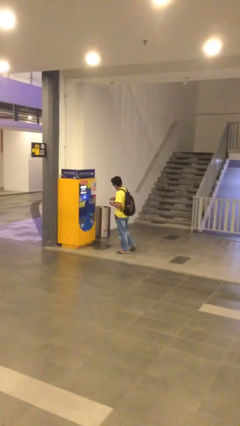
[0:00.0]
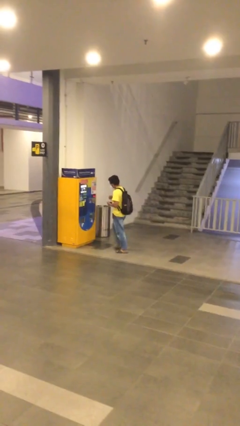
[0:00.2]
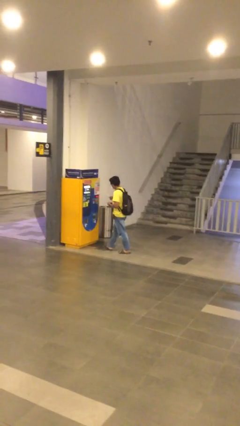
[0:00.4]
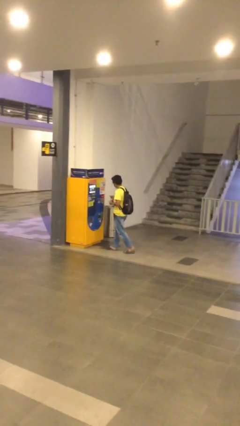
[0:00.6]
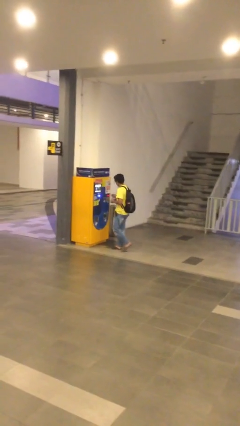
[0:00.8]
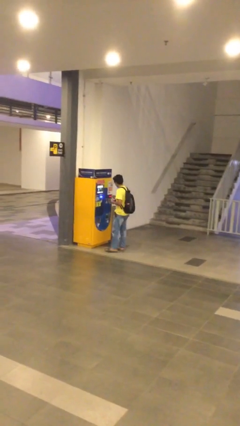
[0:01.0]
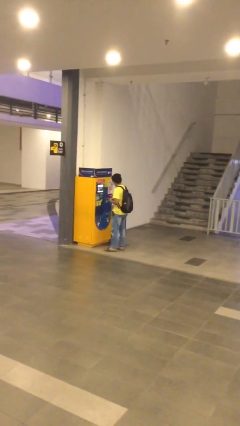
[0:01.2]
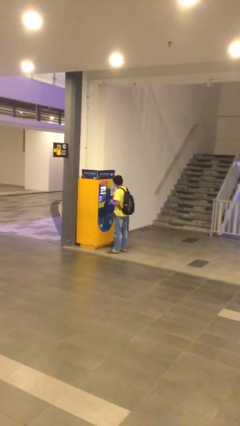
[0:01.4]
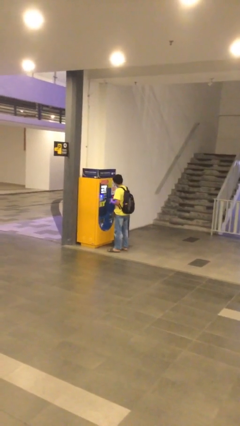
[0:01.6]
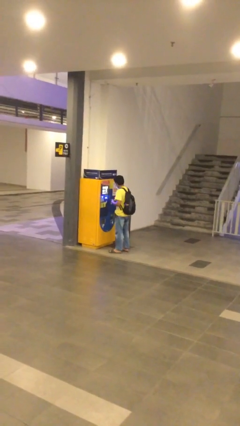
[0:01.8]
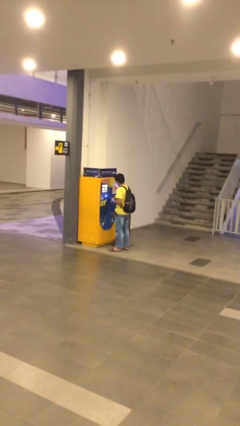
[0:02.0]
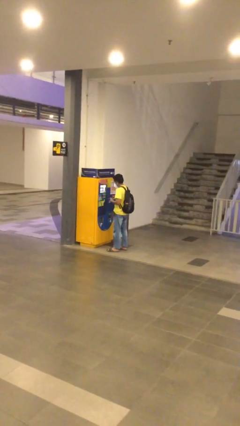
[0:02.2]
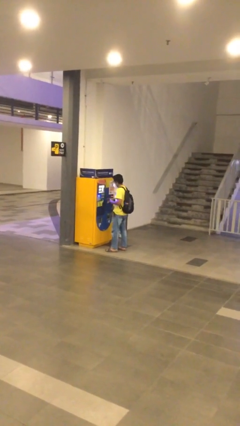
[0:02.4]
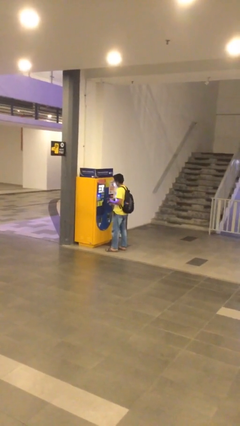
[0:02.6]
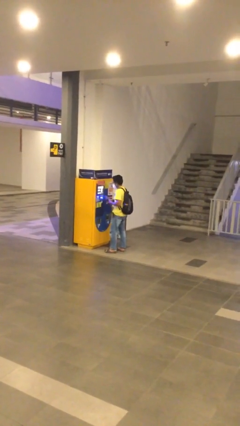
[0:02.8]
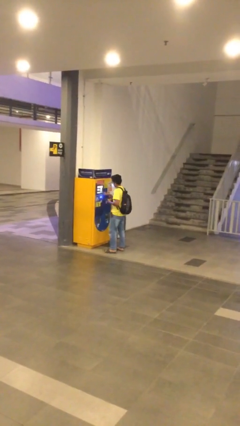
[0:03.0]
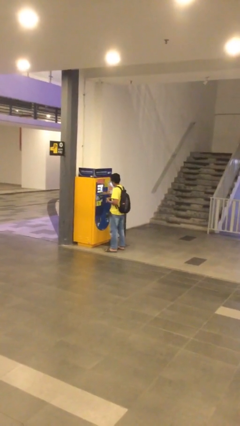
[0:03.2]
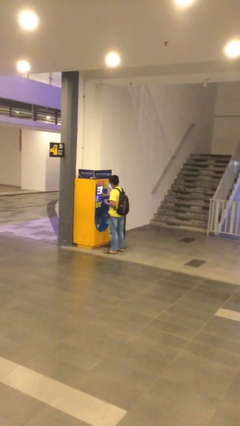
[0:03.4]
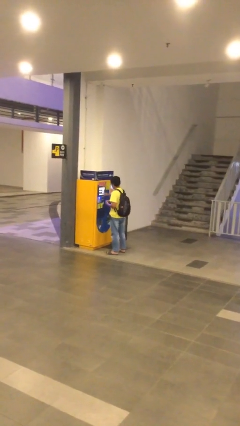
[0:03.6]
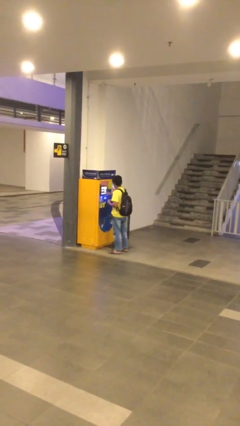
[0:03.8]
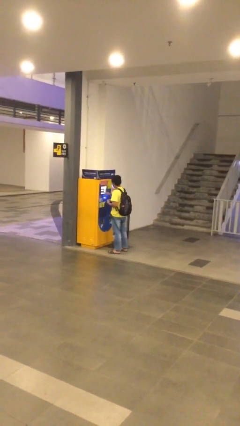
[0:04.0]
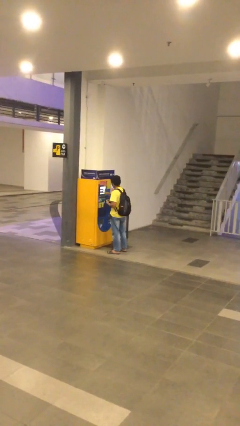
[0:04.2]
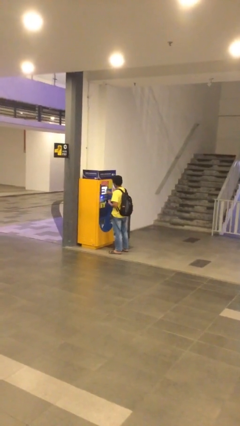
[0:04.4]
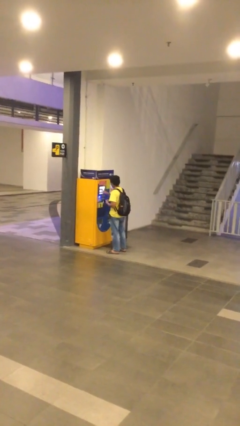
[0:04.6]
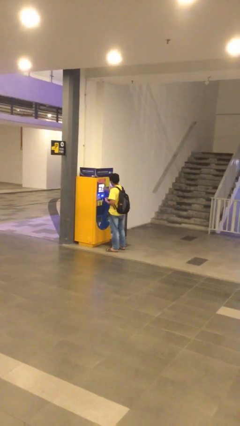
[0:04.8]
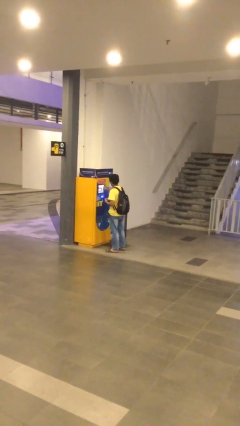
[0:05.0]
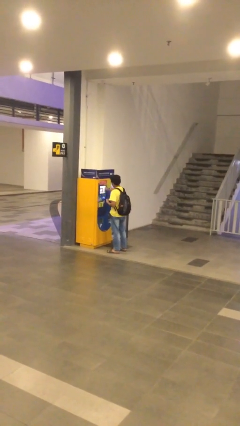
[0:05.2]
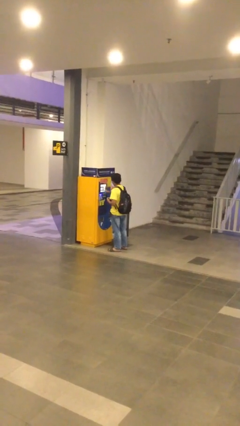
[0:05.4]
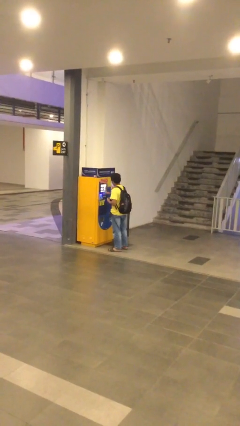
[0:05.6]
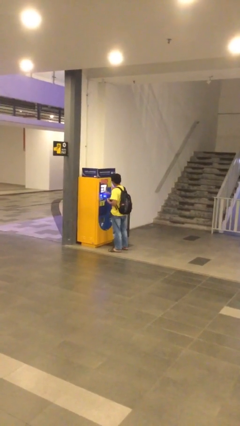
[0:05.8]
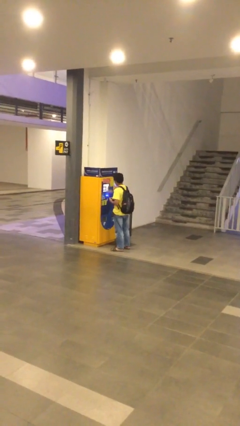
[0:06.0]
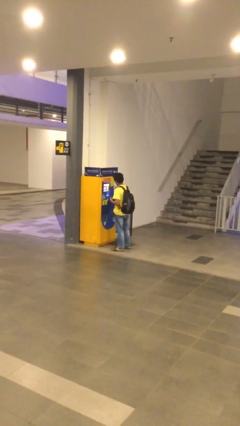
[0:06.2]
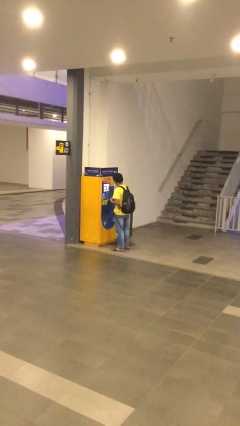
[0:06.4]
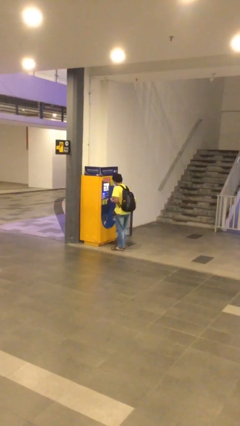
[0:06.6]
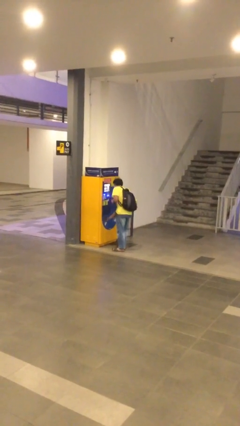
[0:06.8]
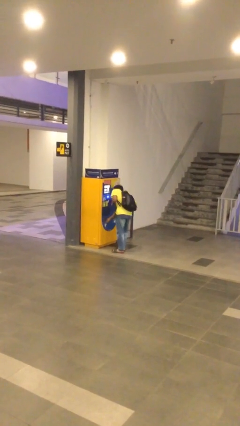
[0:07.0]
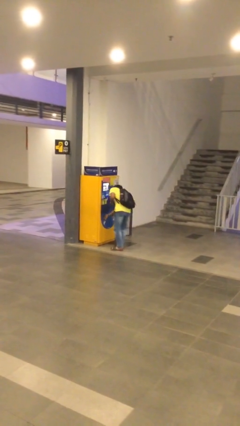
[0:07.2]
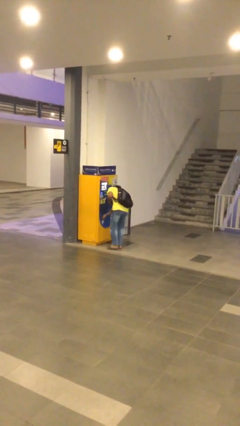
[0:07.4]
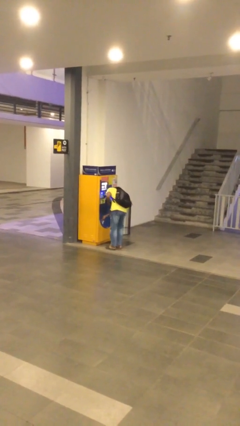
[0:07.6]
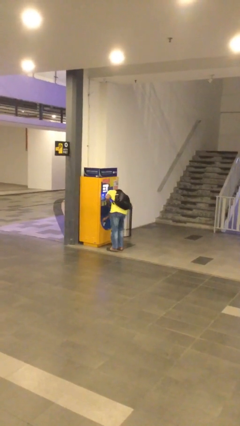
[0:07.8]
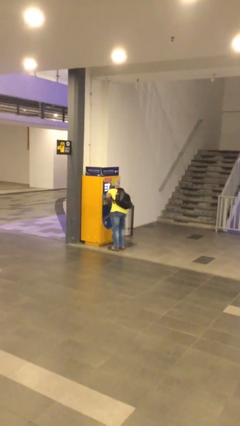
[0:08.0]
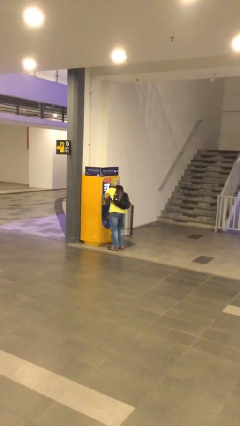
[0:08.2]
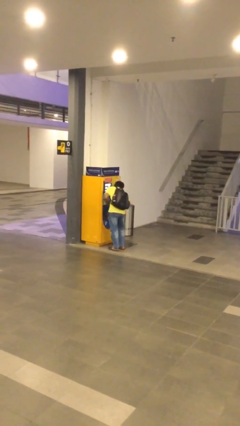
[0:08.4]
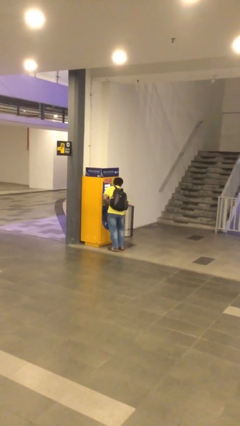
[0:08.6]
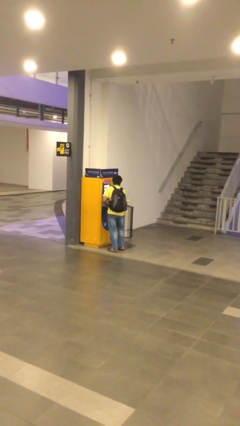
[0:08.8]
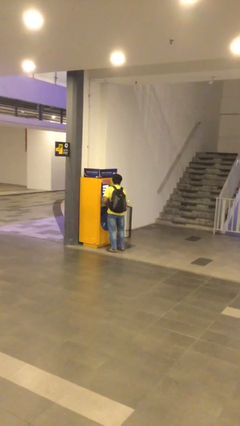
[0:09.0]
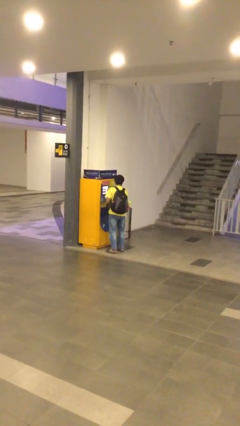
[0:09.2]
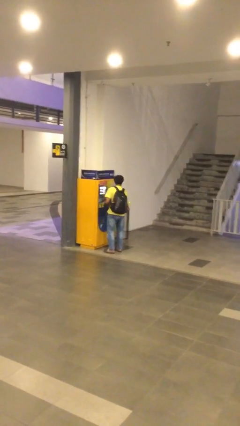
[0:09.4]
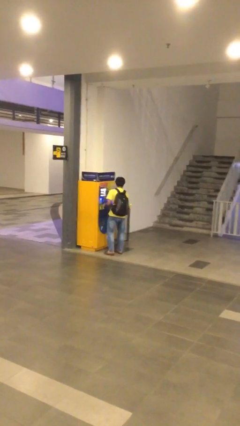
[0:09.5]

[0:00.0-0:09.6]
person purchases from machine

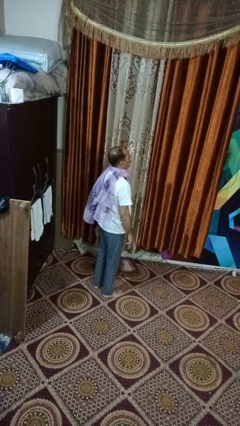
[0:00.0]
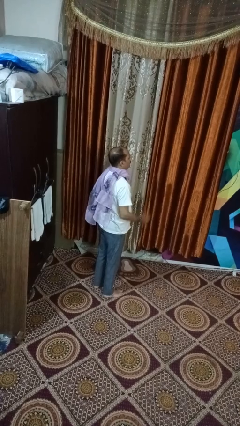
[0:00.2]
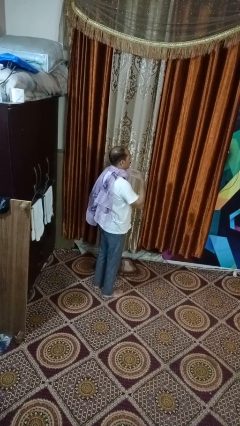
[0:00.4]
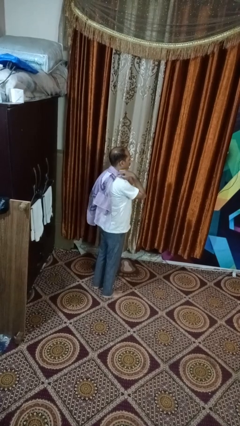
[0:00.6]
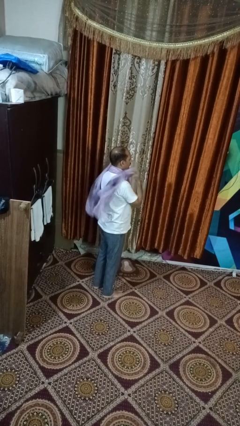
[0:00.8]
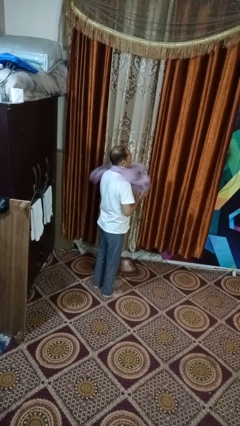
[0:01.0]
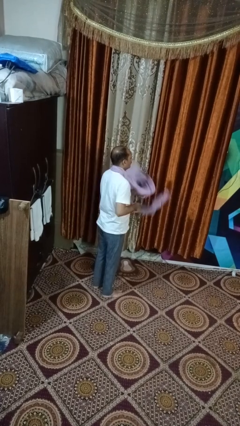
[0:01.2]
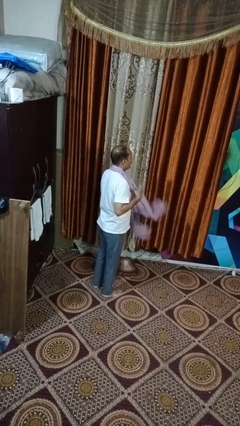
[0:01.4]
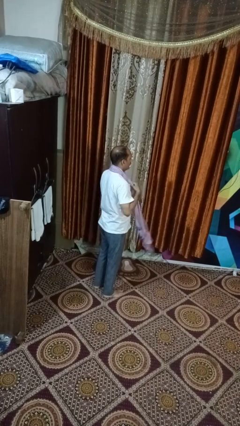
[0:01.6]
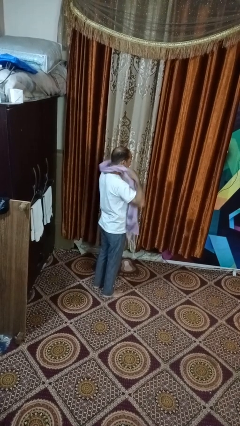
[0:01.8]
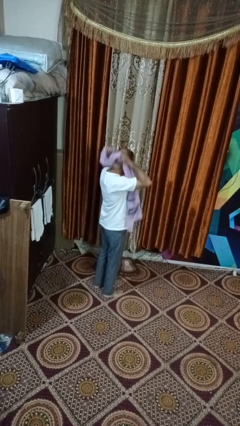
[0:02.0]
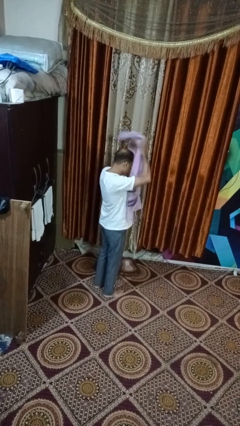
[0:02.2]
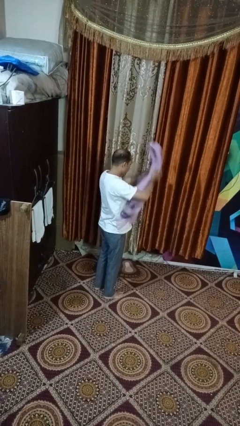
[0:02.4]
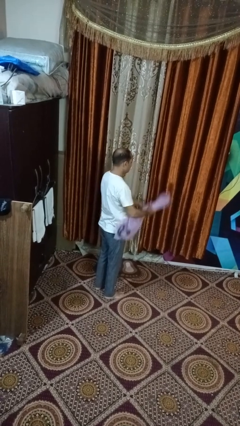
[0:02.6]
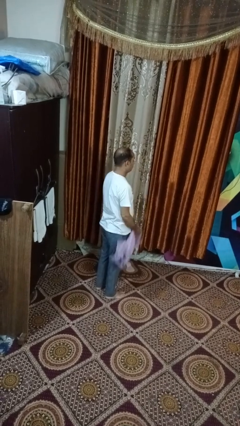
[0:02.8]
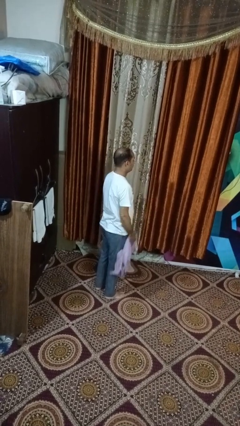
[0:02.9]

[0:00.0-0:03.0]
person takes off scarf

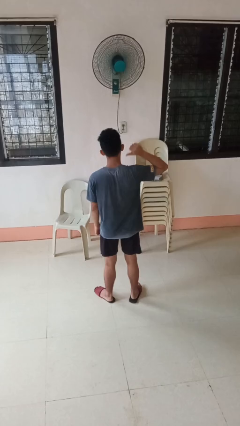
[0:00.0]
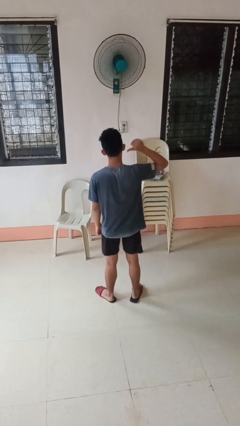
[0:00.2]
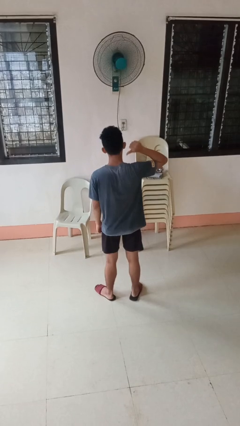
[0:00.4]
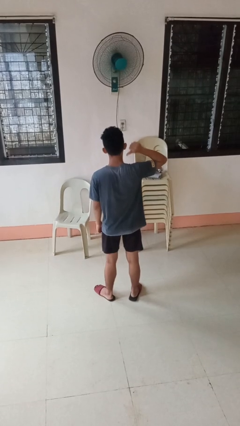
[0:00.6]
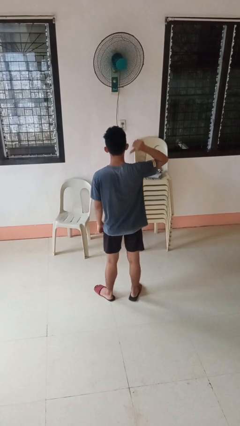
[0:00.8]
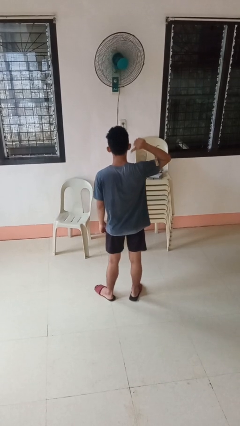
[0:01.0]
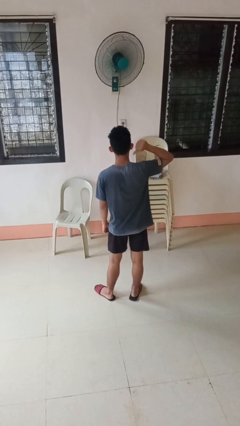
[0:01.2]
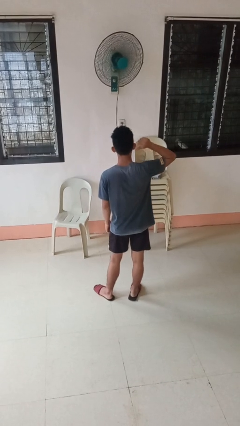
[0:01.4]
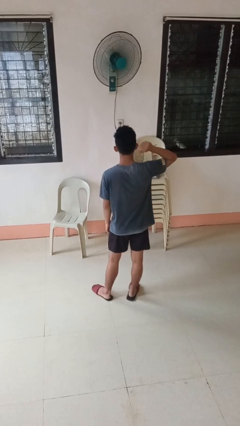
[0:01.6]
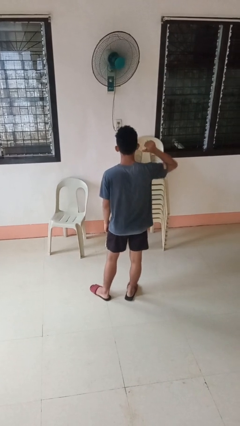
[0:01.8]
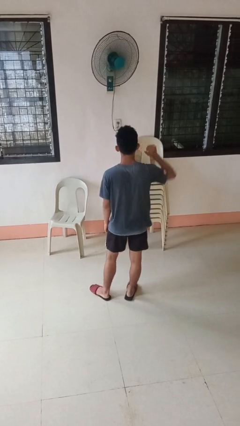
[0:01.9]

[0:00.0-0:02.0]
person gestures behind me

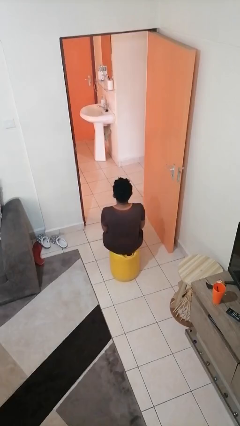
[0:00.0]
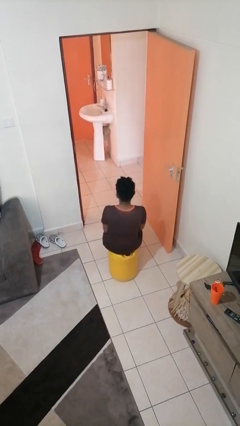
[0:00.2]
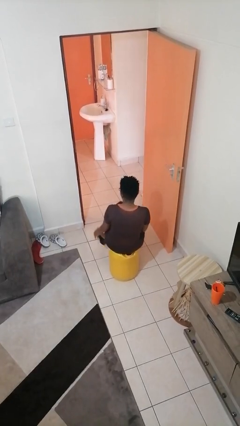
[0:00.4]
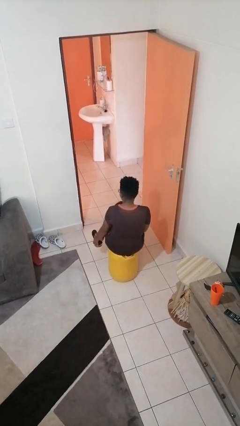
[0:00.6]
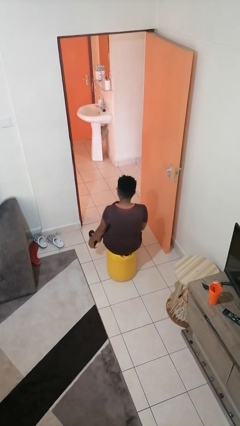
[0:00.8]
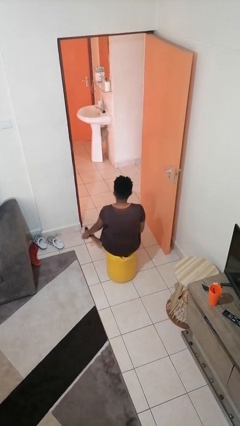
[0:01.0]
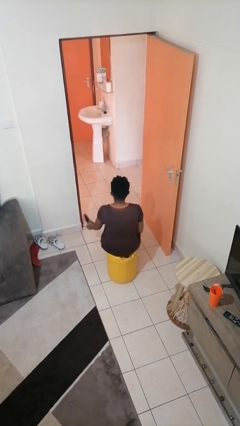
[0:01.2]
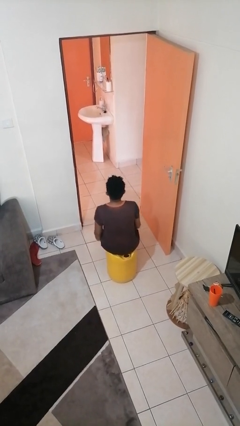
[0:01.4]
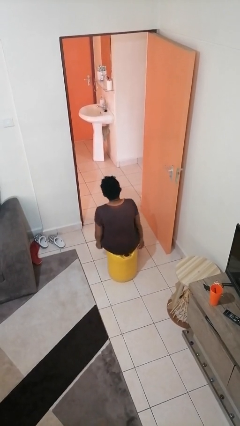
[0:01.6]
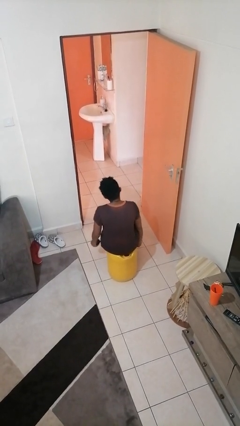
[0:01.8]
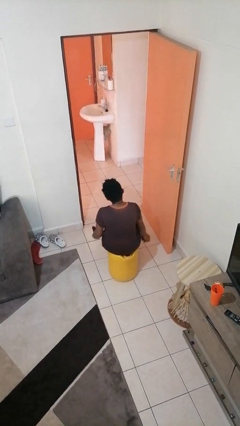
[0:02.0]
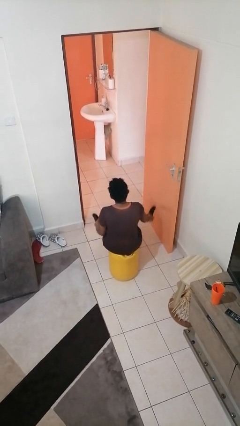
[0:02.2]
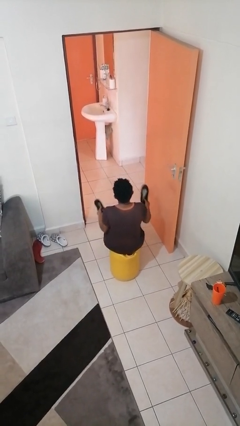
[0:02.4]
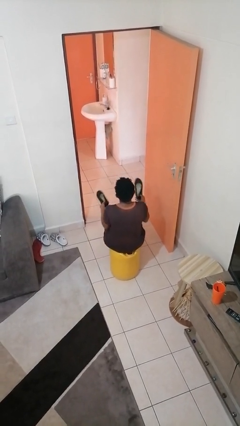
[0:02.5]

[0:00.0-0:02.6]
person takes off shoes

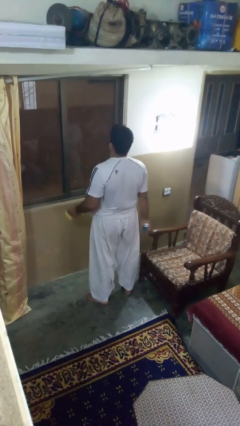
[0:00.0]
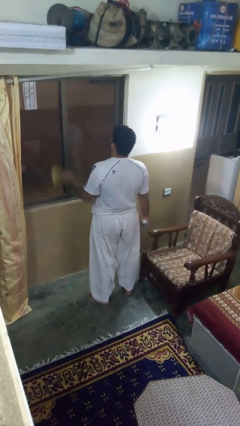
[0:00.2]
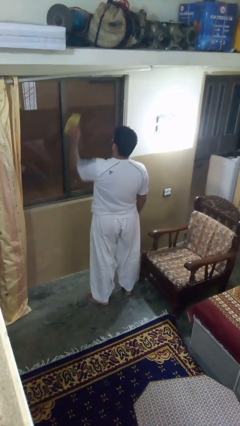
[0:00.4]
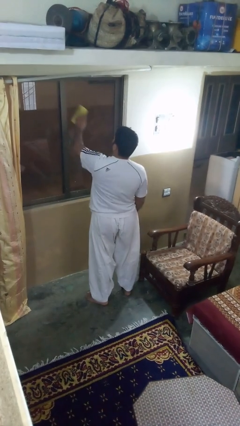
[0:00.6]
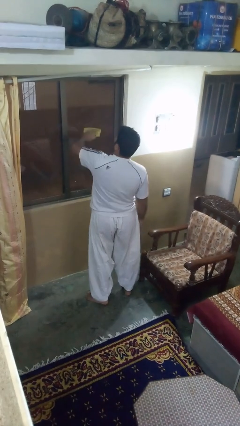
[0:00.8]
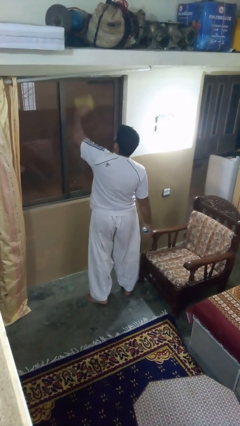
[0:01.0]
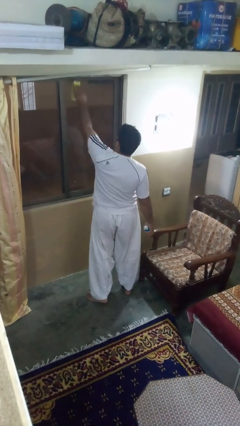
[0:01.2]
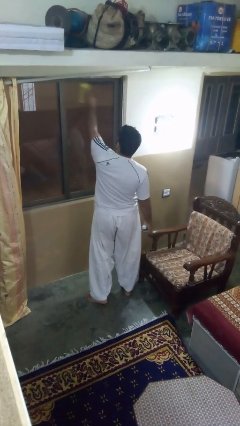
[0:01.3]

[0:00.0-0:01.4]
person washes window
